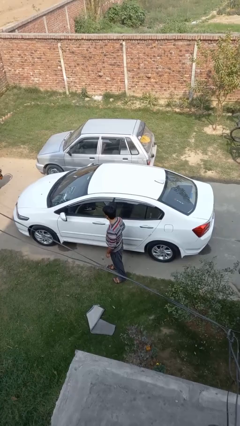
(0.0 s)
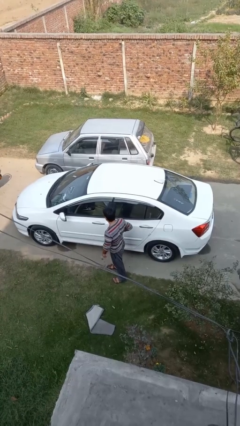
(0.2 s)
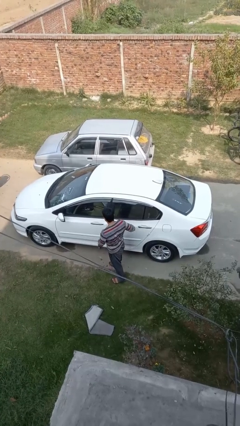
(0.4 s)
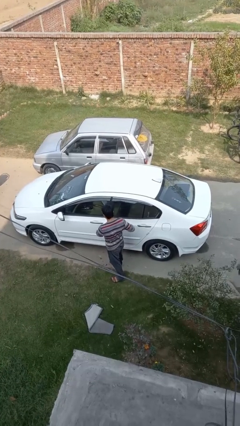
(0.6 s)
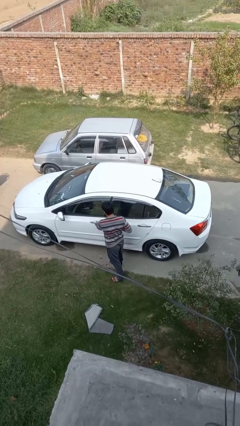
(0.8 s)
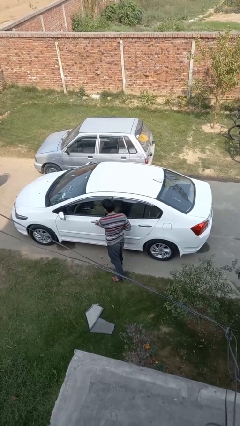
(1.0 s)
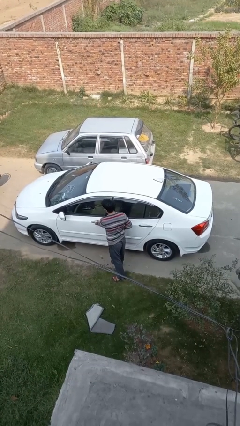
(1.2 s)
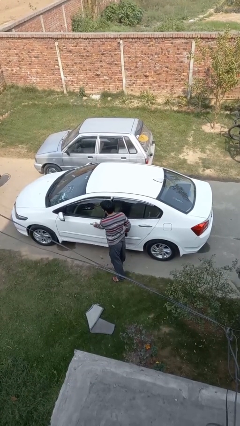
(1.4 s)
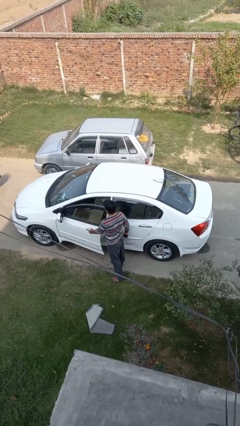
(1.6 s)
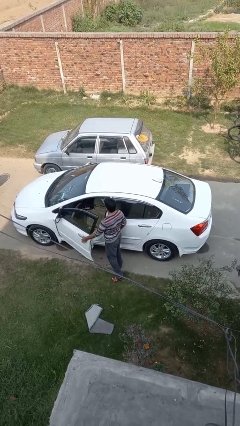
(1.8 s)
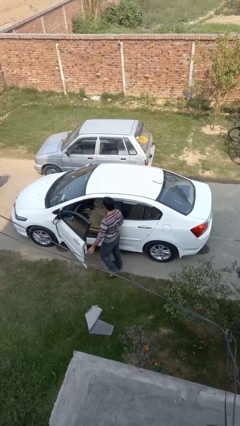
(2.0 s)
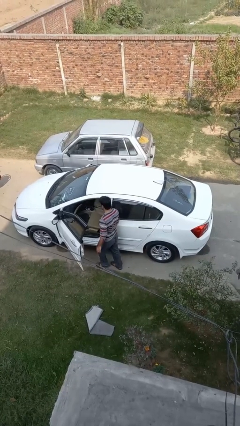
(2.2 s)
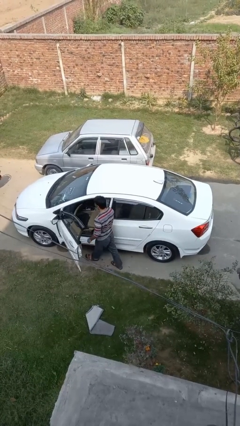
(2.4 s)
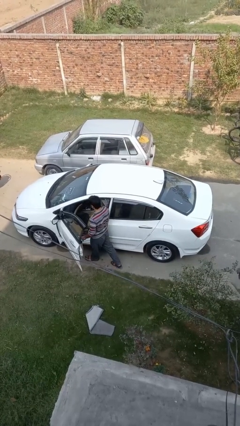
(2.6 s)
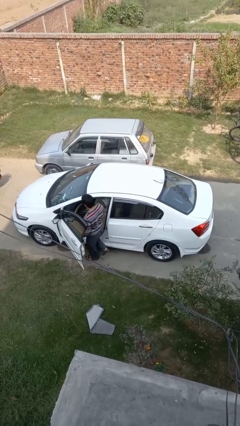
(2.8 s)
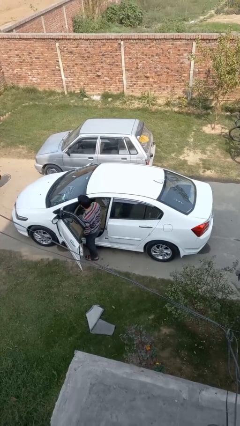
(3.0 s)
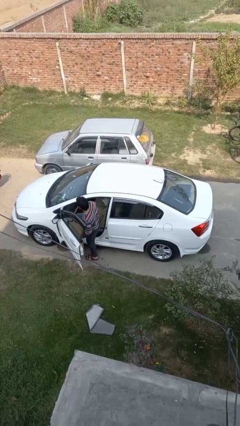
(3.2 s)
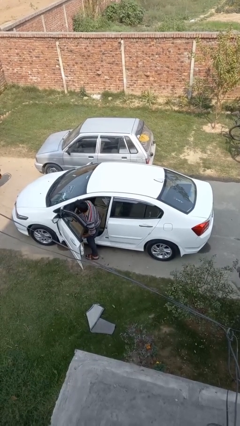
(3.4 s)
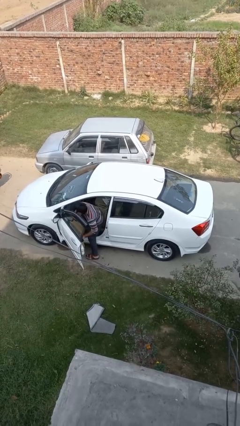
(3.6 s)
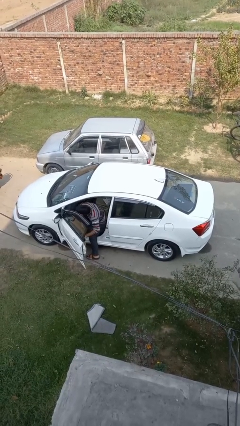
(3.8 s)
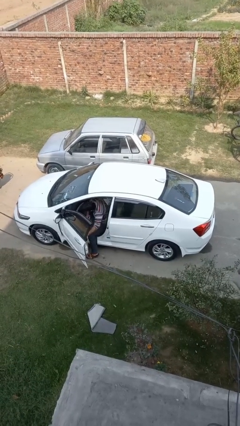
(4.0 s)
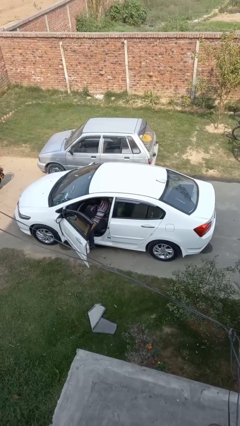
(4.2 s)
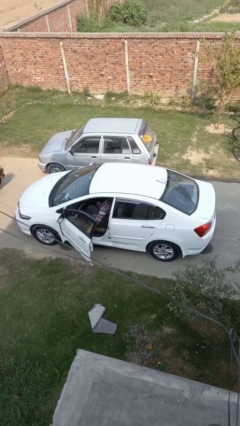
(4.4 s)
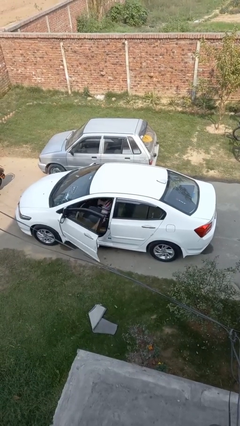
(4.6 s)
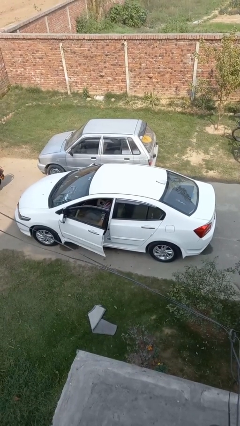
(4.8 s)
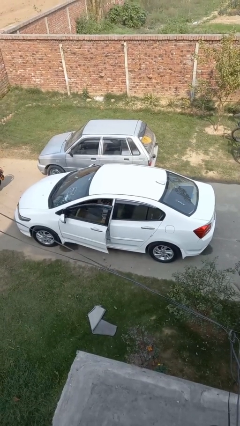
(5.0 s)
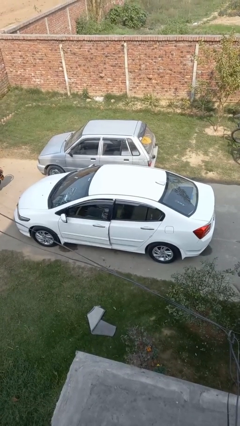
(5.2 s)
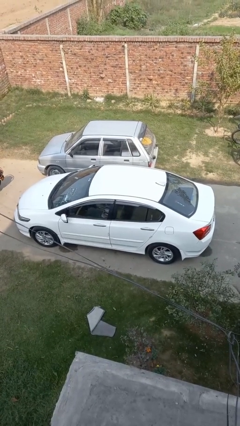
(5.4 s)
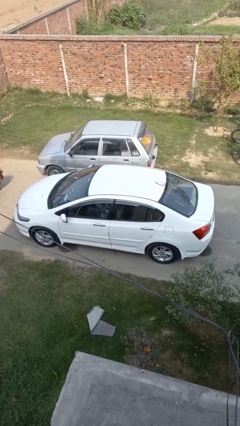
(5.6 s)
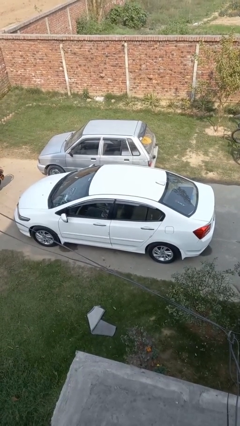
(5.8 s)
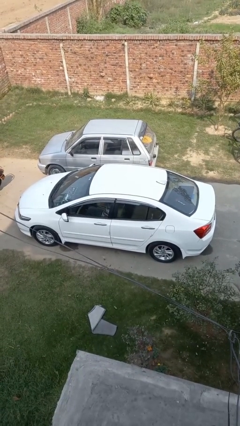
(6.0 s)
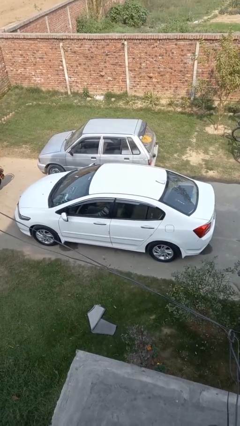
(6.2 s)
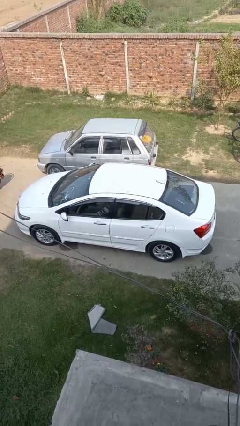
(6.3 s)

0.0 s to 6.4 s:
car picks up person

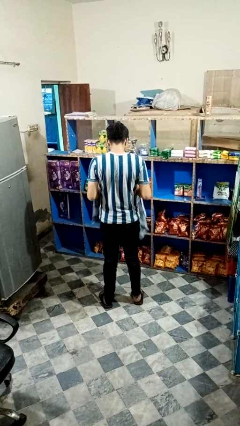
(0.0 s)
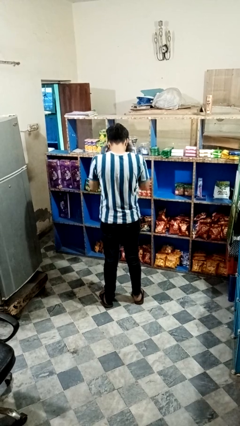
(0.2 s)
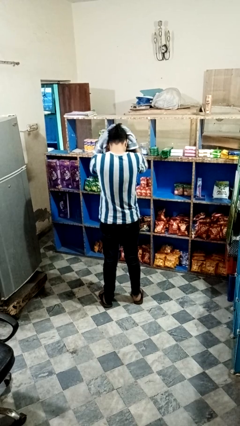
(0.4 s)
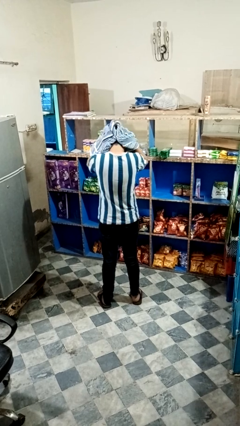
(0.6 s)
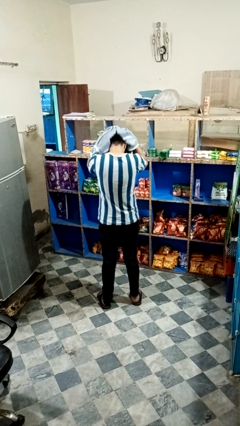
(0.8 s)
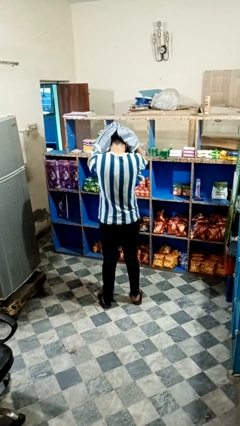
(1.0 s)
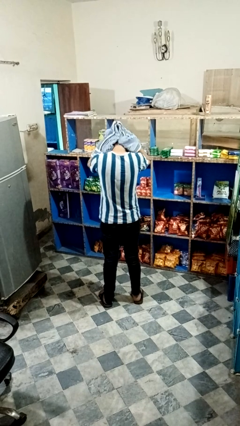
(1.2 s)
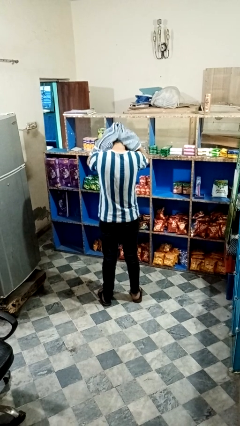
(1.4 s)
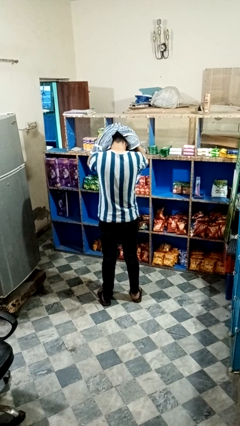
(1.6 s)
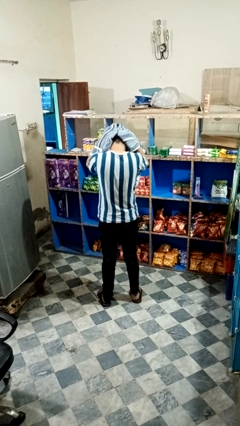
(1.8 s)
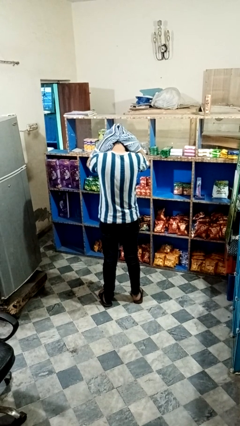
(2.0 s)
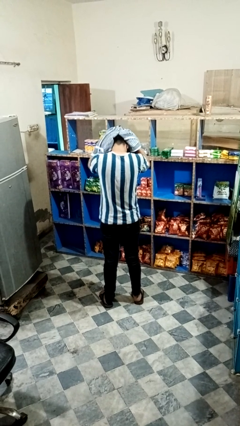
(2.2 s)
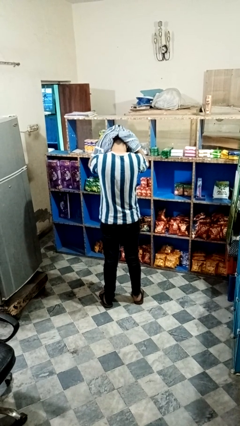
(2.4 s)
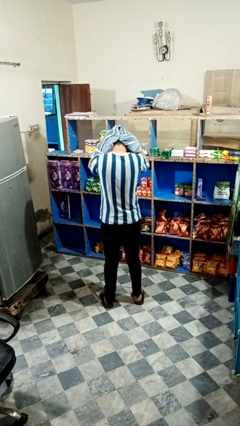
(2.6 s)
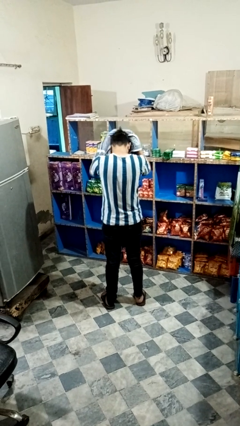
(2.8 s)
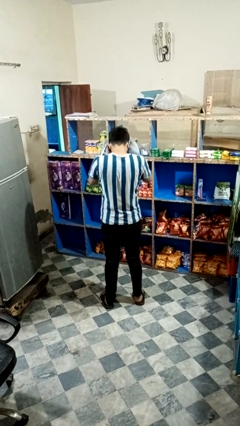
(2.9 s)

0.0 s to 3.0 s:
person dries hair with towel

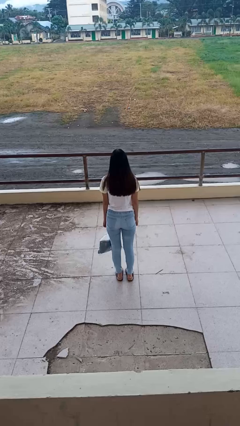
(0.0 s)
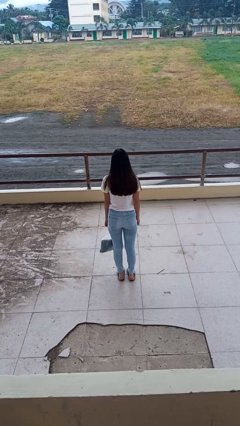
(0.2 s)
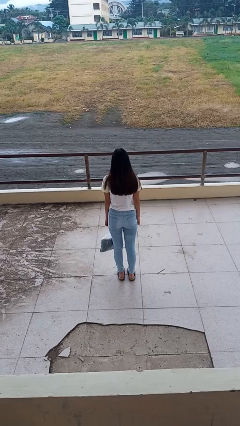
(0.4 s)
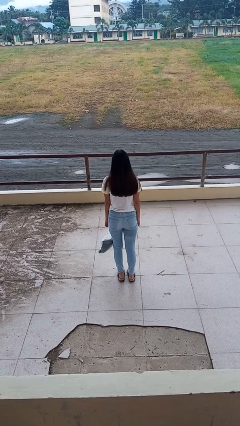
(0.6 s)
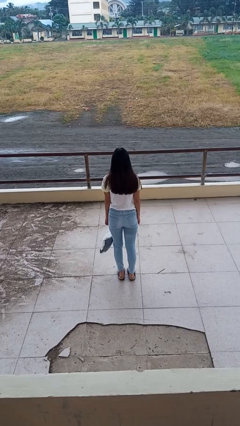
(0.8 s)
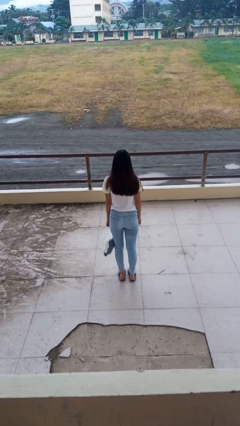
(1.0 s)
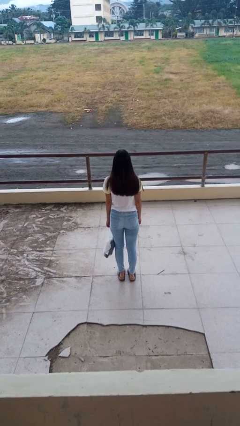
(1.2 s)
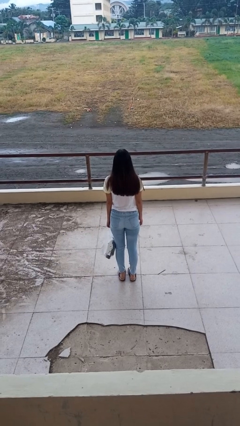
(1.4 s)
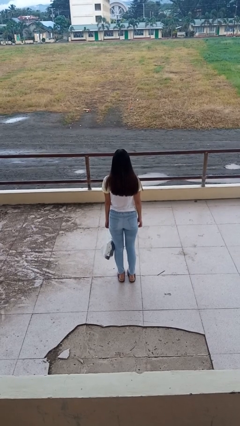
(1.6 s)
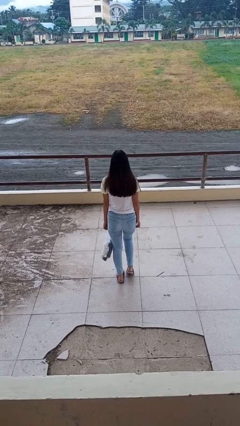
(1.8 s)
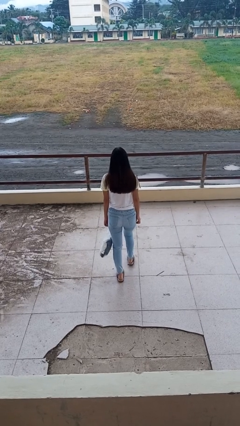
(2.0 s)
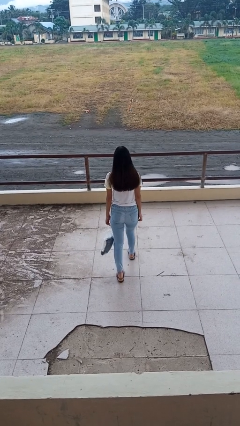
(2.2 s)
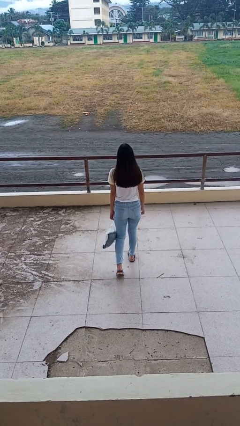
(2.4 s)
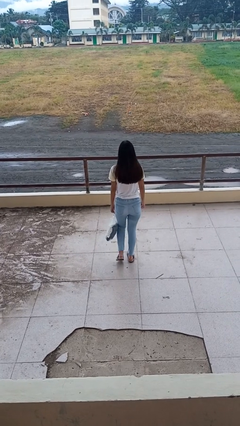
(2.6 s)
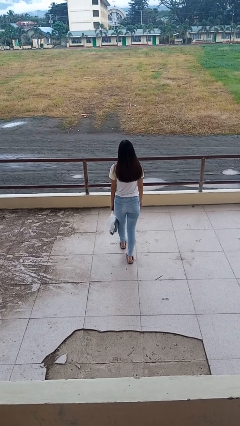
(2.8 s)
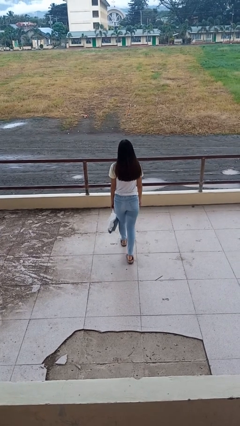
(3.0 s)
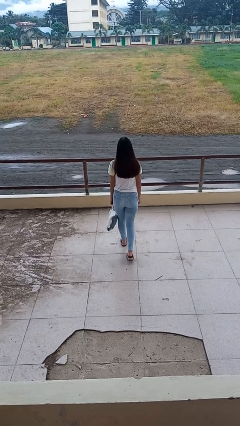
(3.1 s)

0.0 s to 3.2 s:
person carries groceries

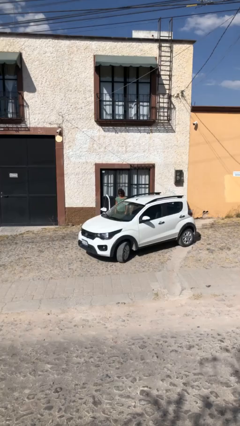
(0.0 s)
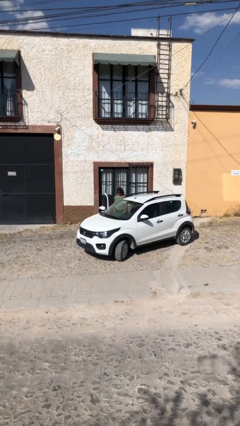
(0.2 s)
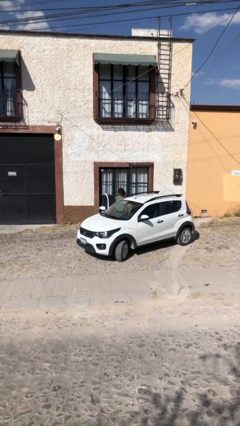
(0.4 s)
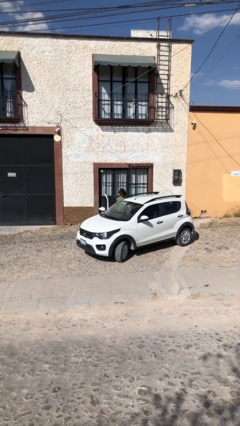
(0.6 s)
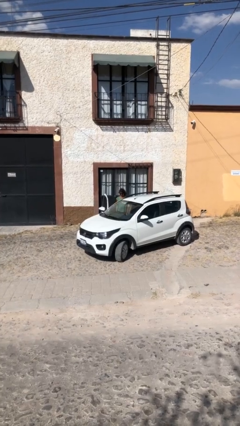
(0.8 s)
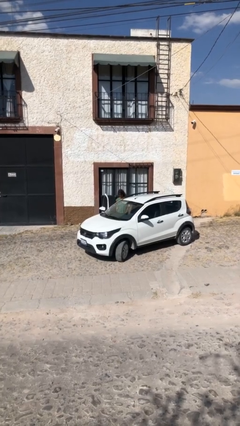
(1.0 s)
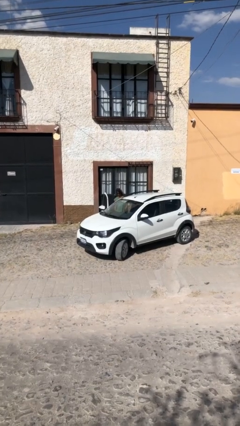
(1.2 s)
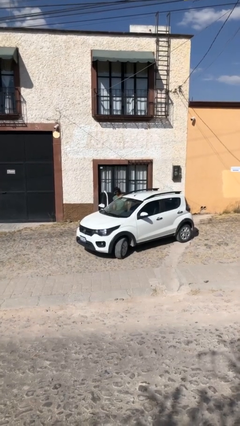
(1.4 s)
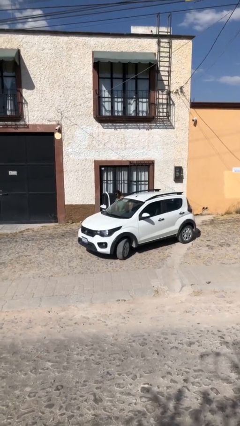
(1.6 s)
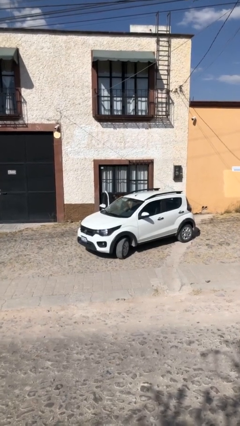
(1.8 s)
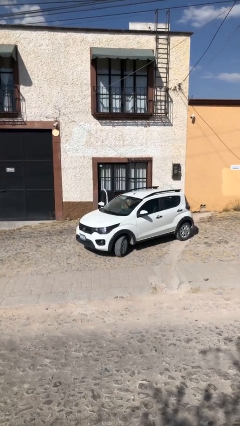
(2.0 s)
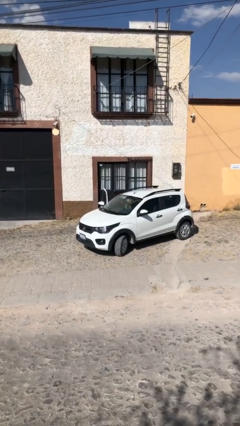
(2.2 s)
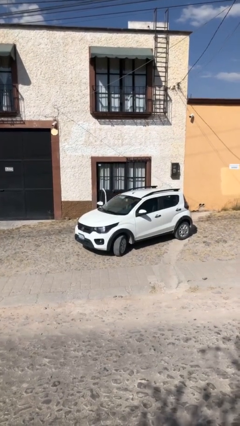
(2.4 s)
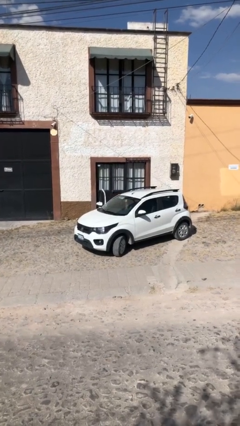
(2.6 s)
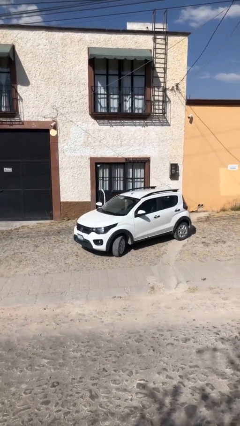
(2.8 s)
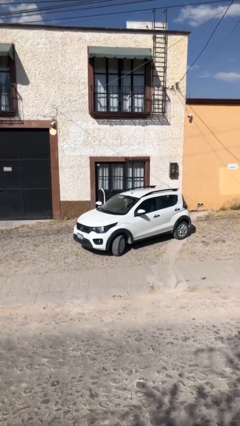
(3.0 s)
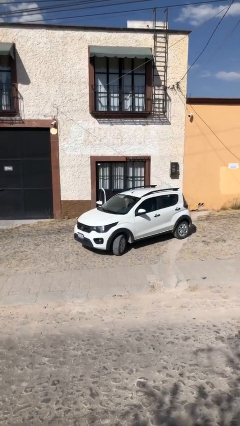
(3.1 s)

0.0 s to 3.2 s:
person enters car

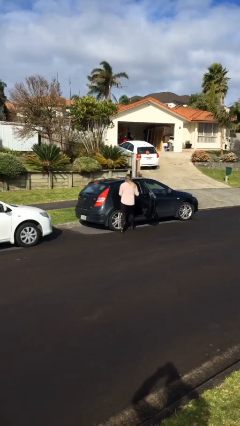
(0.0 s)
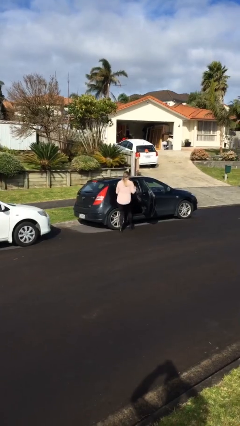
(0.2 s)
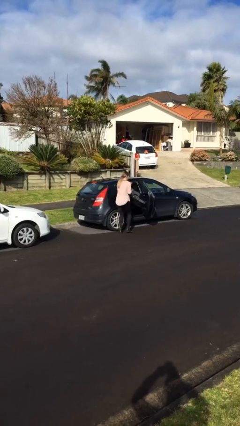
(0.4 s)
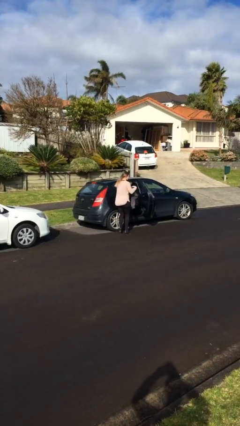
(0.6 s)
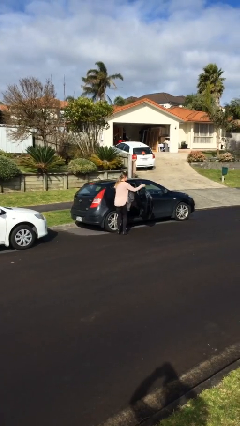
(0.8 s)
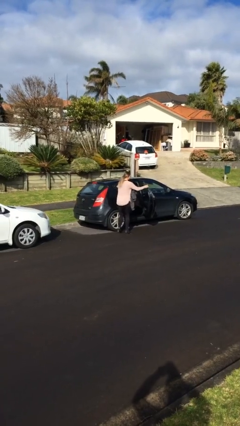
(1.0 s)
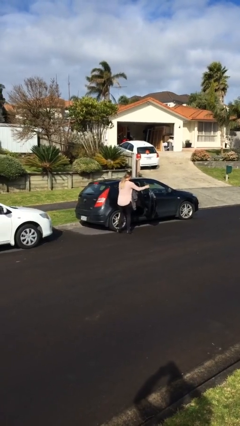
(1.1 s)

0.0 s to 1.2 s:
person unloads car

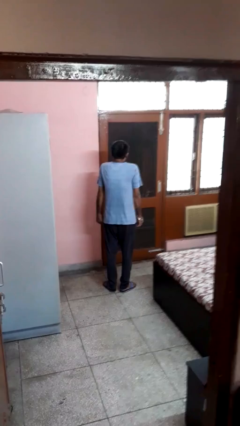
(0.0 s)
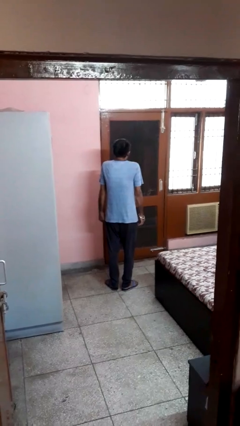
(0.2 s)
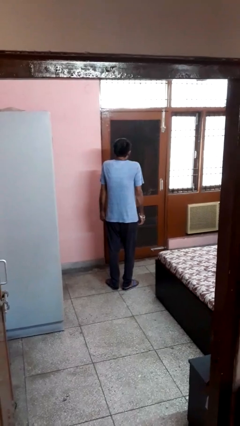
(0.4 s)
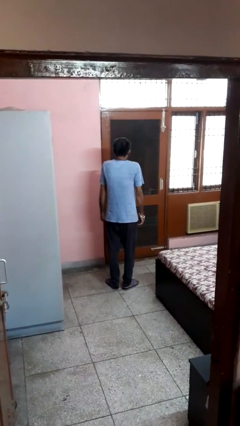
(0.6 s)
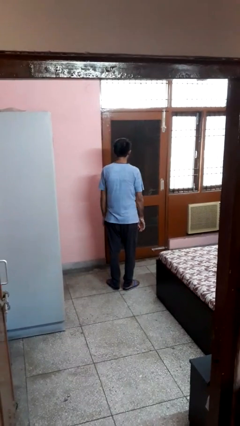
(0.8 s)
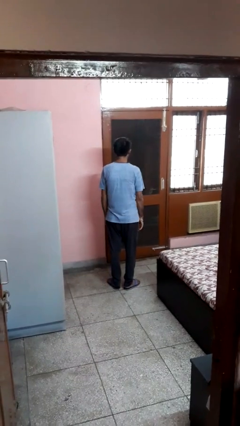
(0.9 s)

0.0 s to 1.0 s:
person shrugs
